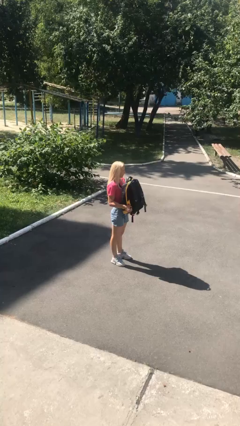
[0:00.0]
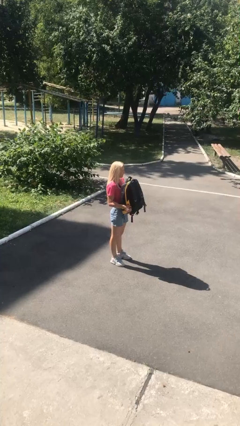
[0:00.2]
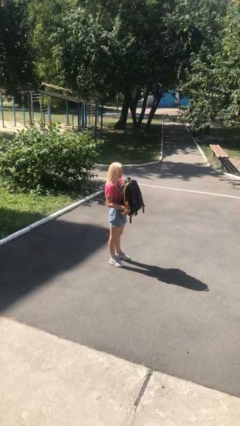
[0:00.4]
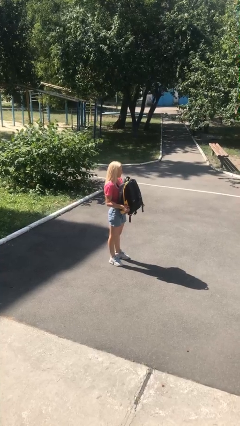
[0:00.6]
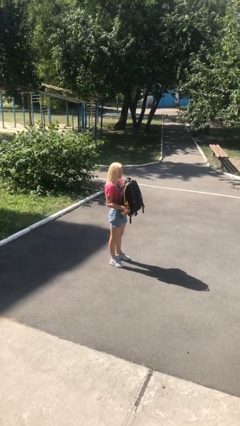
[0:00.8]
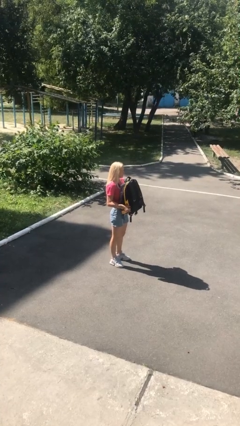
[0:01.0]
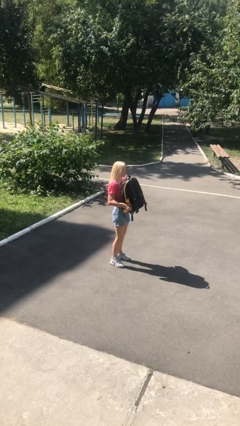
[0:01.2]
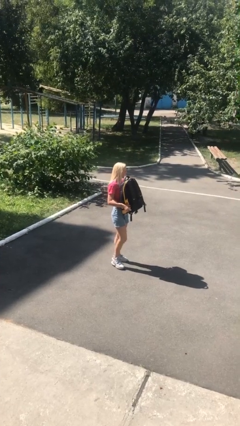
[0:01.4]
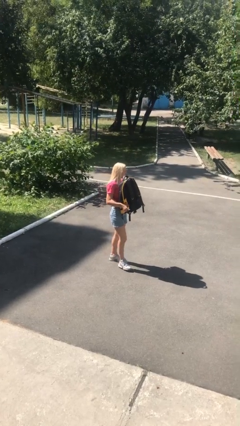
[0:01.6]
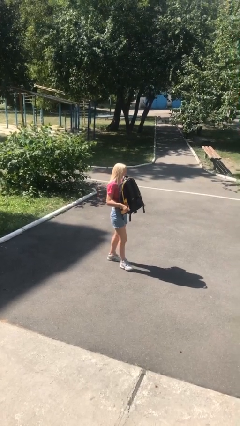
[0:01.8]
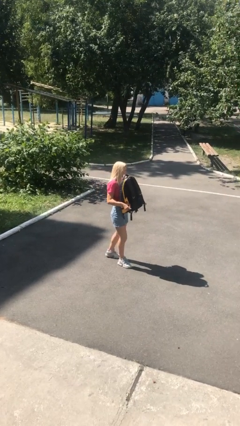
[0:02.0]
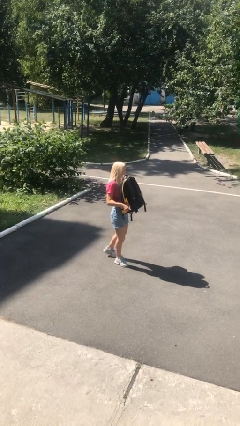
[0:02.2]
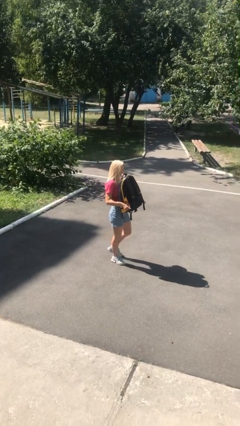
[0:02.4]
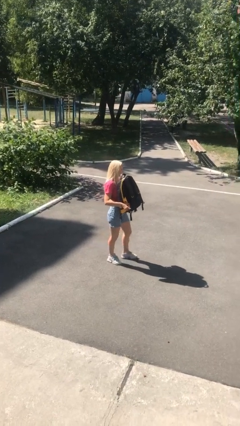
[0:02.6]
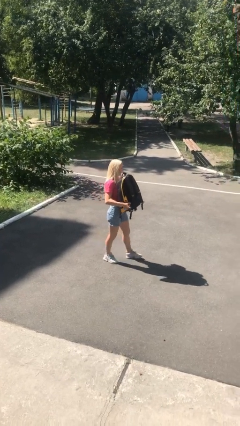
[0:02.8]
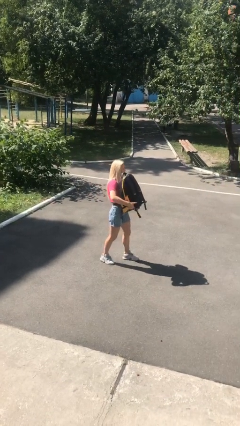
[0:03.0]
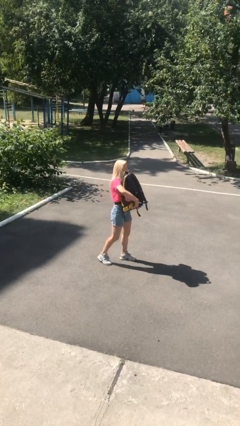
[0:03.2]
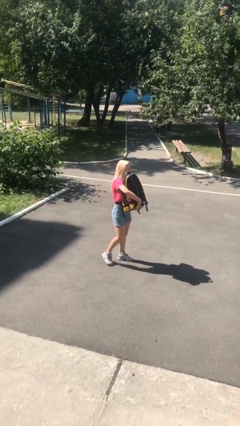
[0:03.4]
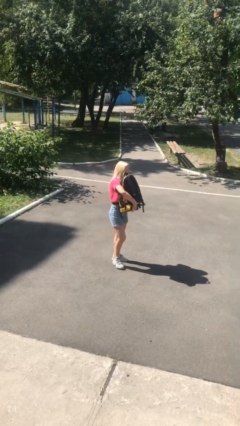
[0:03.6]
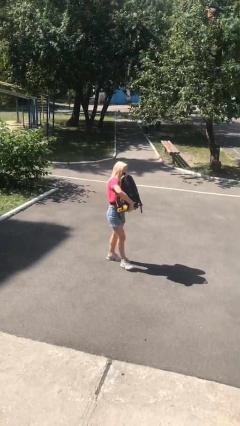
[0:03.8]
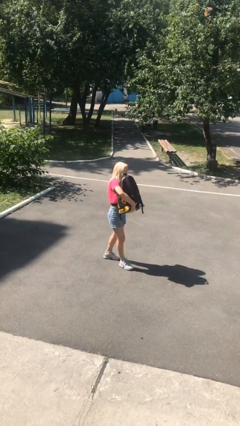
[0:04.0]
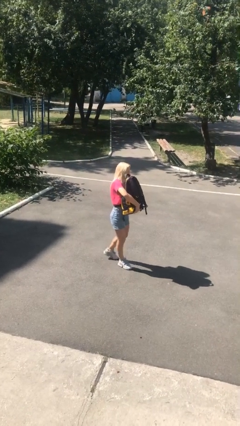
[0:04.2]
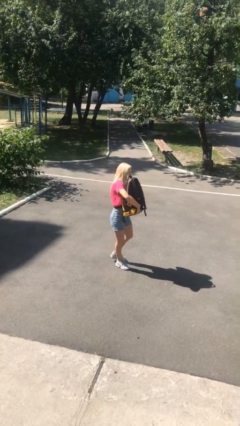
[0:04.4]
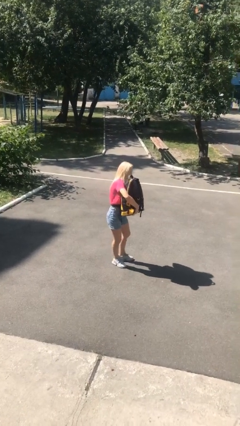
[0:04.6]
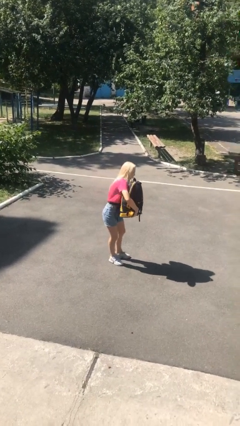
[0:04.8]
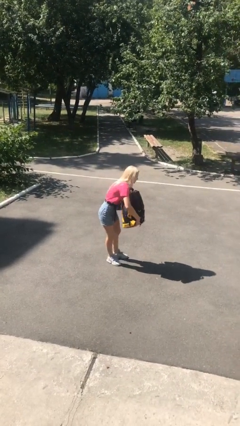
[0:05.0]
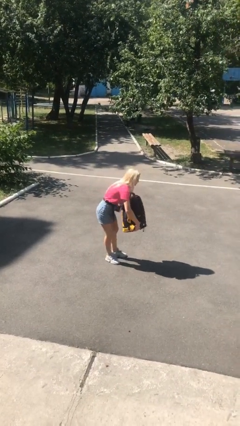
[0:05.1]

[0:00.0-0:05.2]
person carries heavy object

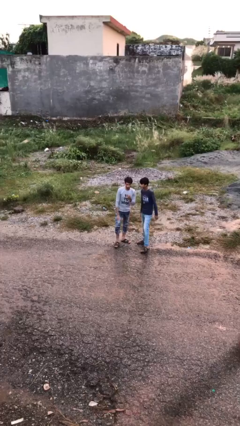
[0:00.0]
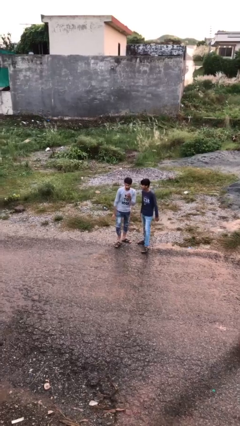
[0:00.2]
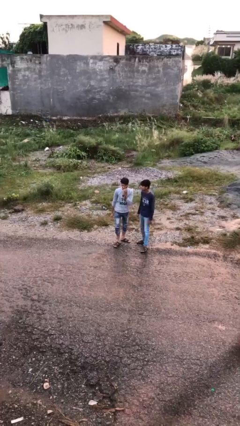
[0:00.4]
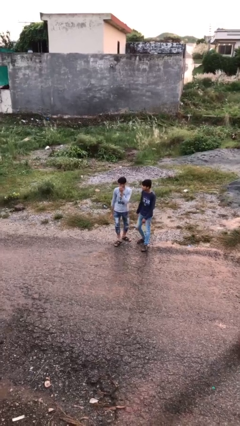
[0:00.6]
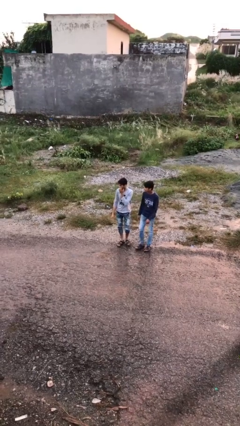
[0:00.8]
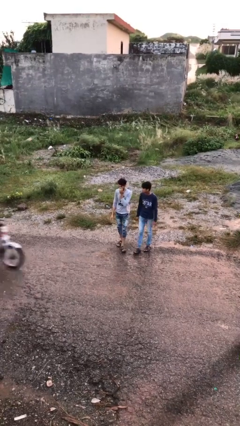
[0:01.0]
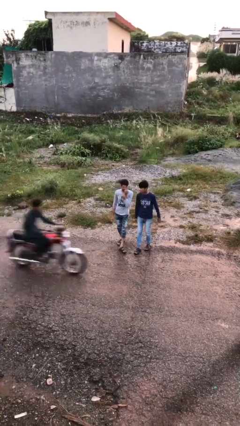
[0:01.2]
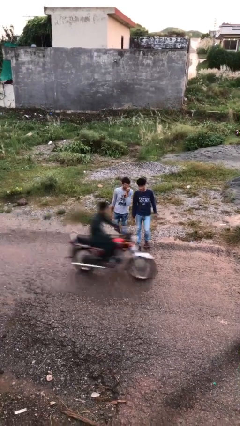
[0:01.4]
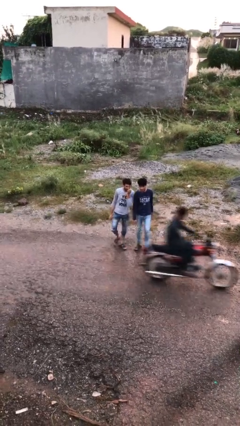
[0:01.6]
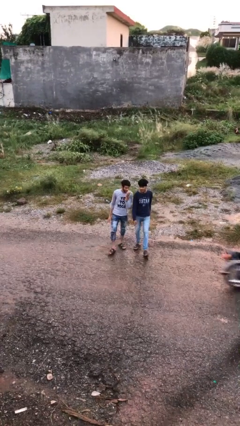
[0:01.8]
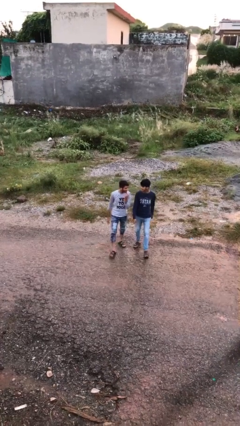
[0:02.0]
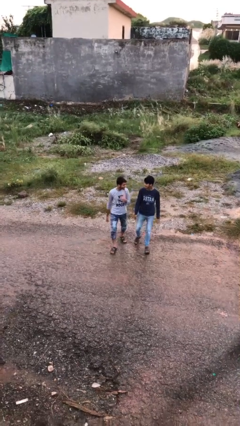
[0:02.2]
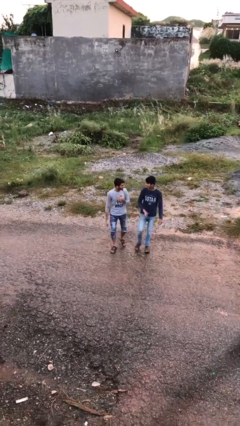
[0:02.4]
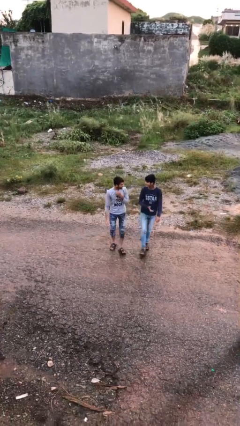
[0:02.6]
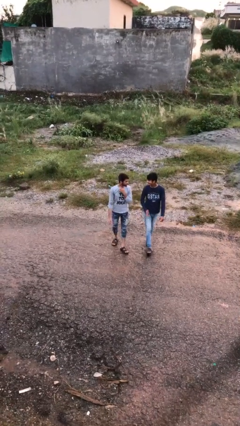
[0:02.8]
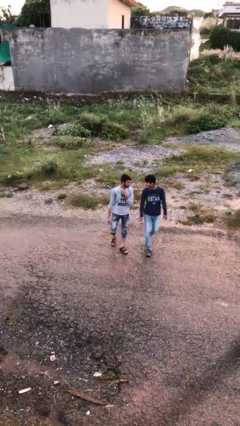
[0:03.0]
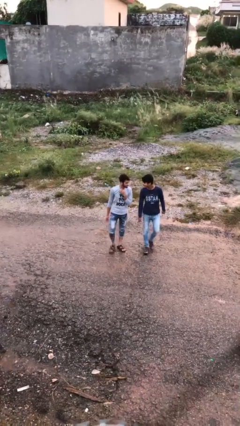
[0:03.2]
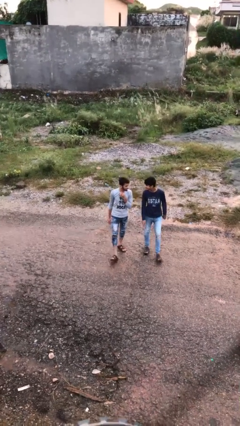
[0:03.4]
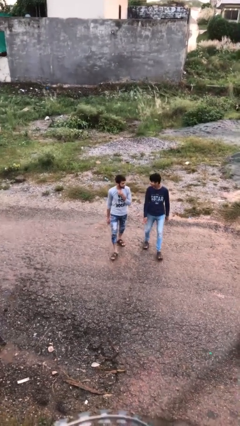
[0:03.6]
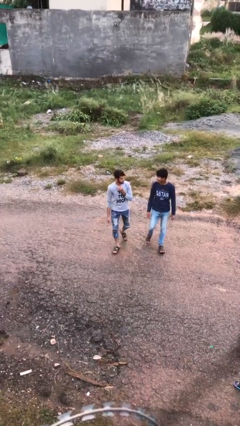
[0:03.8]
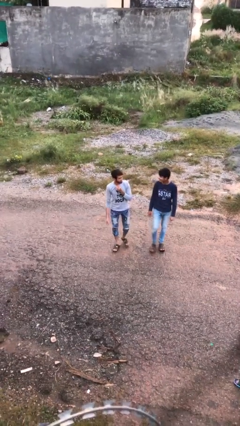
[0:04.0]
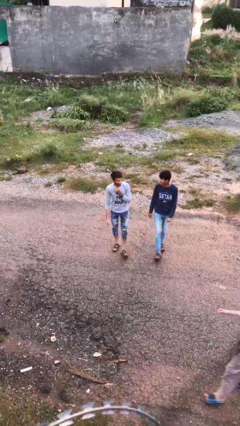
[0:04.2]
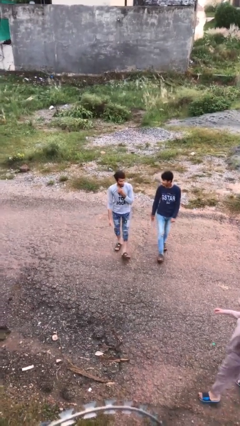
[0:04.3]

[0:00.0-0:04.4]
person talks to person

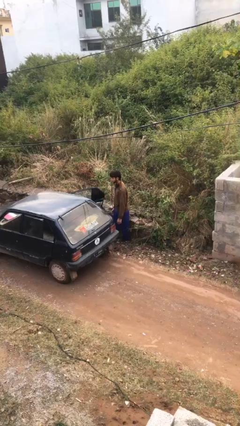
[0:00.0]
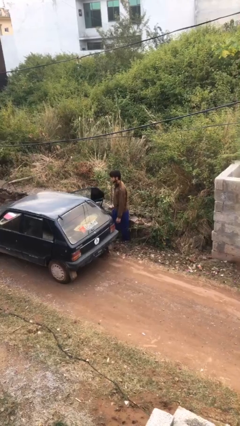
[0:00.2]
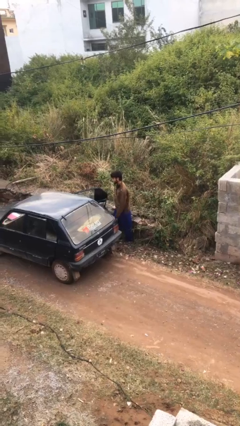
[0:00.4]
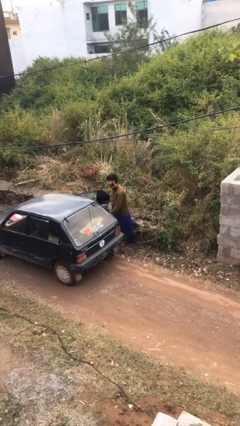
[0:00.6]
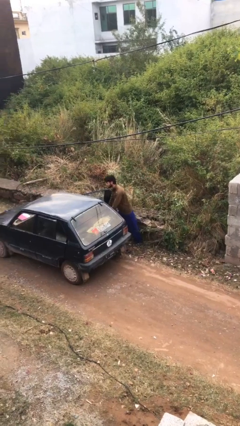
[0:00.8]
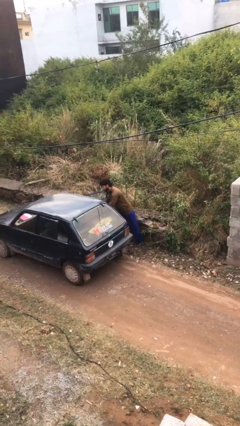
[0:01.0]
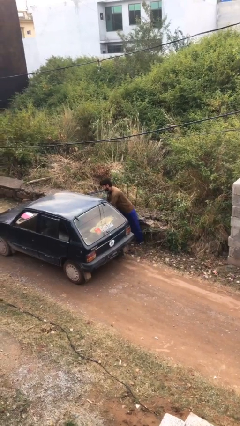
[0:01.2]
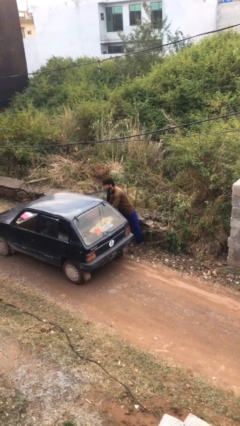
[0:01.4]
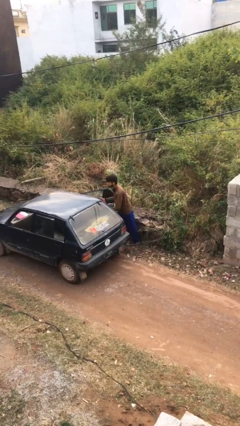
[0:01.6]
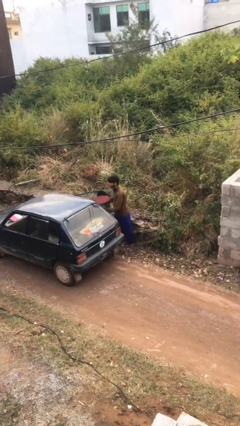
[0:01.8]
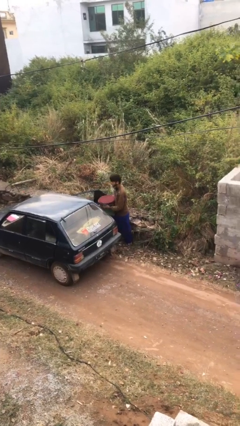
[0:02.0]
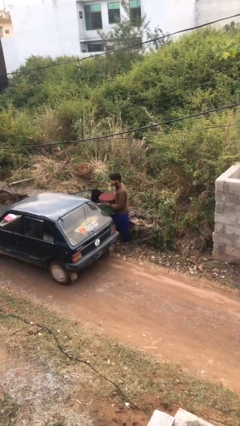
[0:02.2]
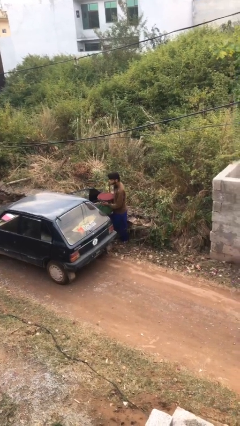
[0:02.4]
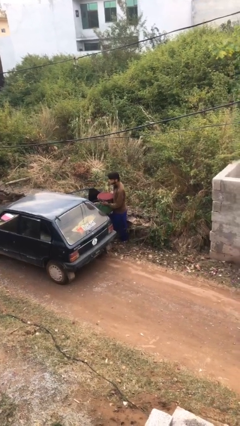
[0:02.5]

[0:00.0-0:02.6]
person unloads car

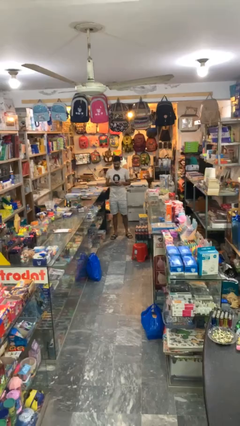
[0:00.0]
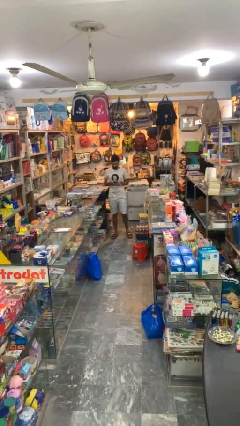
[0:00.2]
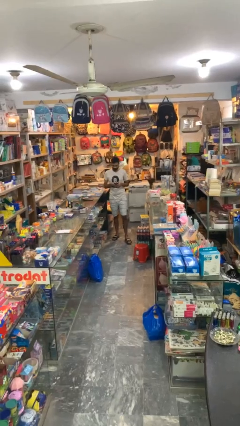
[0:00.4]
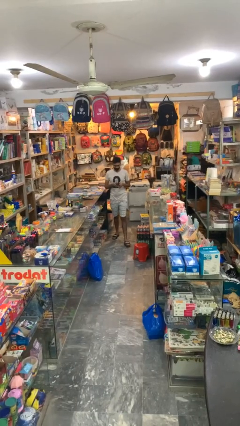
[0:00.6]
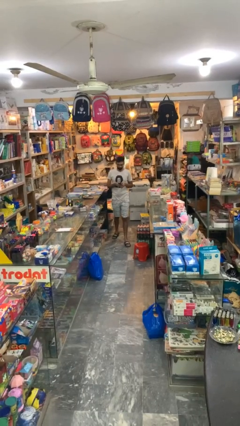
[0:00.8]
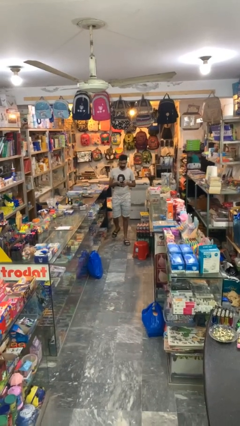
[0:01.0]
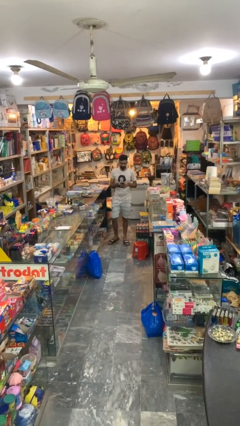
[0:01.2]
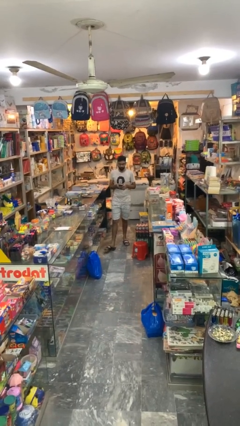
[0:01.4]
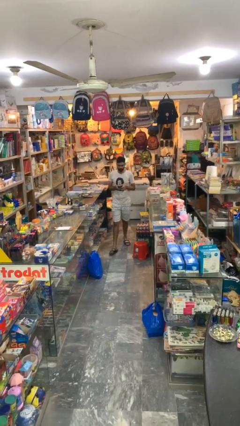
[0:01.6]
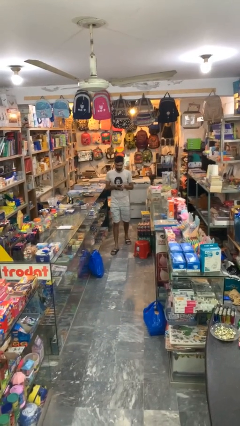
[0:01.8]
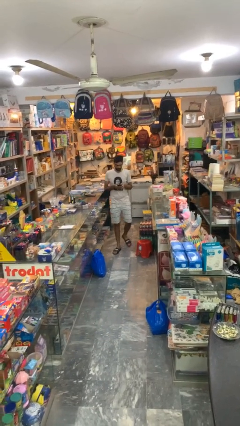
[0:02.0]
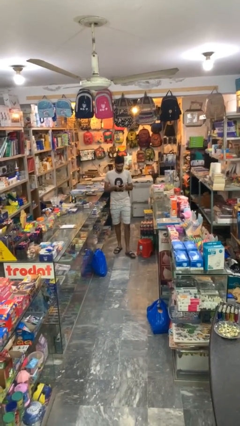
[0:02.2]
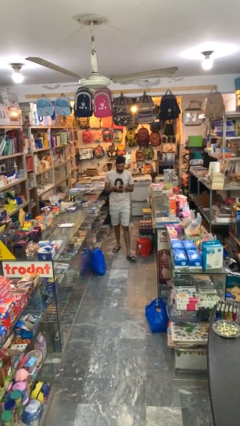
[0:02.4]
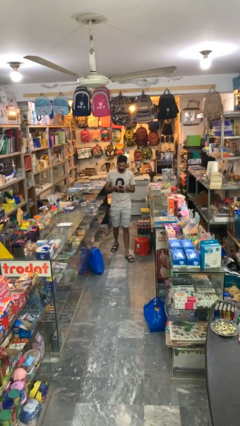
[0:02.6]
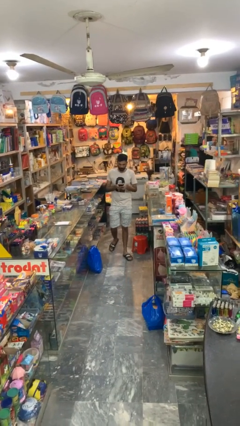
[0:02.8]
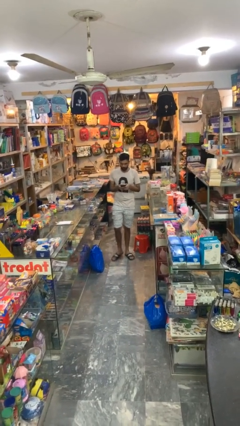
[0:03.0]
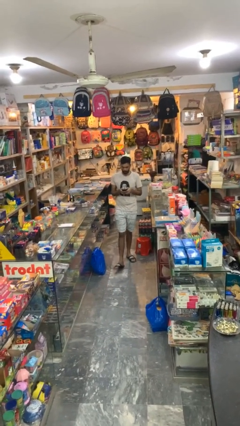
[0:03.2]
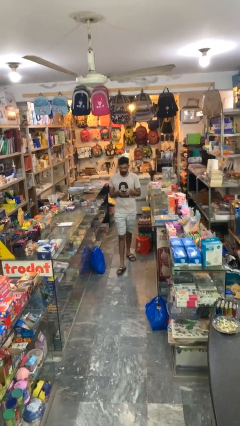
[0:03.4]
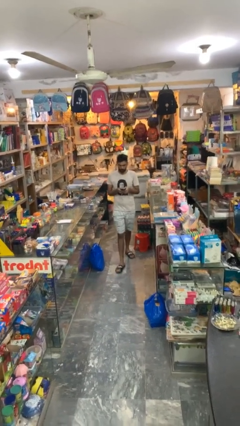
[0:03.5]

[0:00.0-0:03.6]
person texts on phone

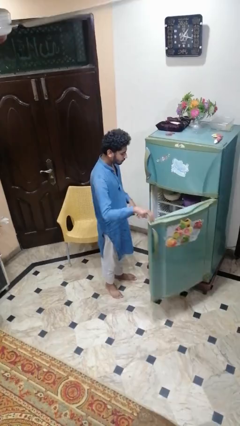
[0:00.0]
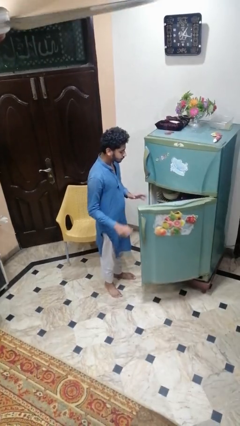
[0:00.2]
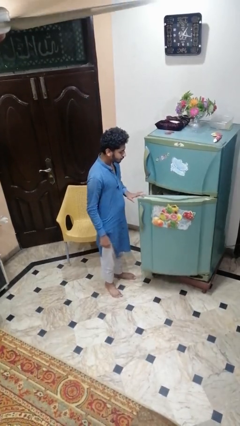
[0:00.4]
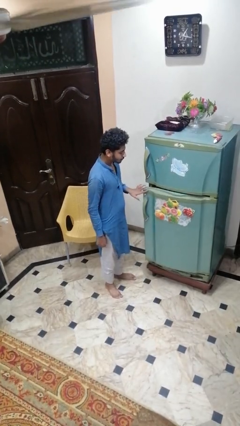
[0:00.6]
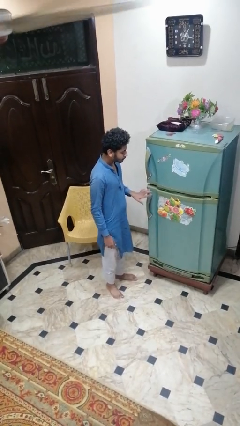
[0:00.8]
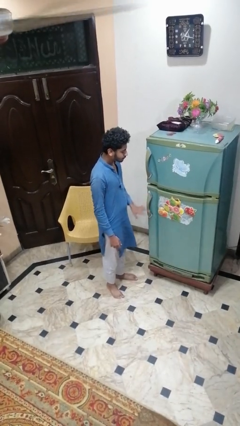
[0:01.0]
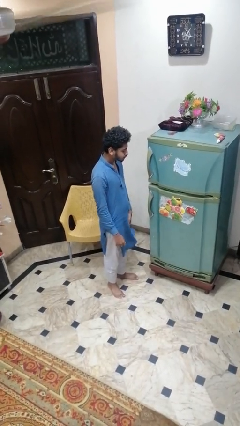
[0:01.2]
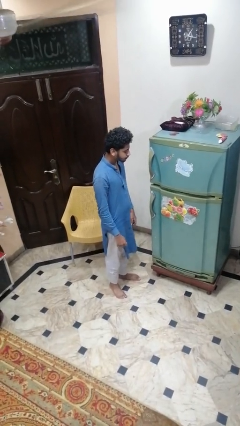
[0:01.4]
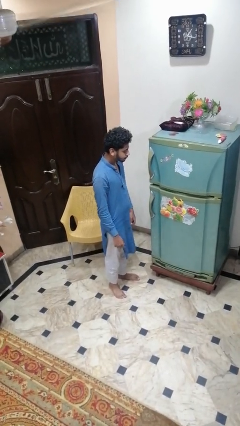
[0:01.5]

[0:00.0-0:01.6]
person closes refrigerator
